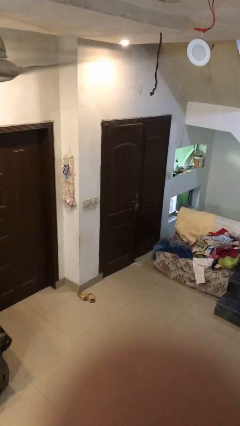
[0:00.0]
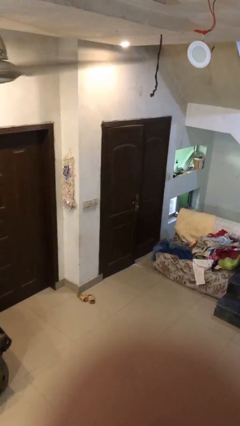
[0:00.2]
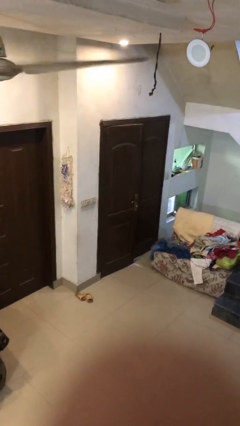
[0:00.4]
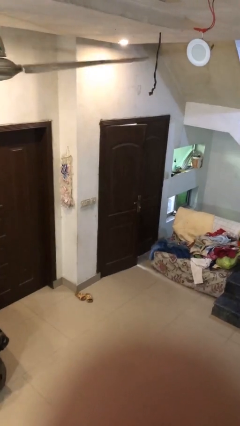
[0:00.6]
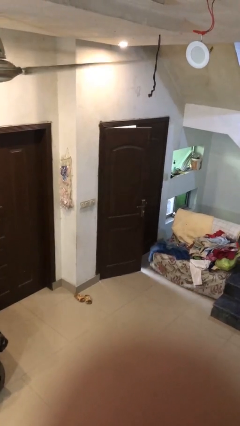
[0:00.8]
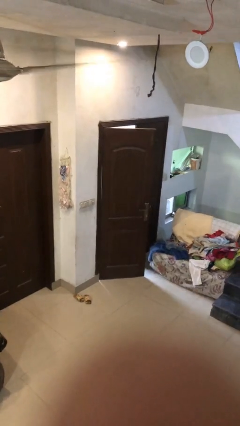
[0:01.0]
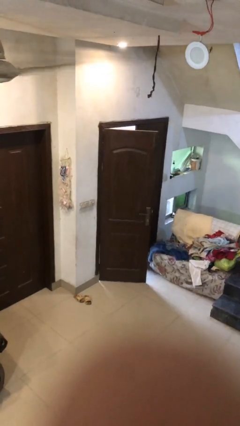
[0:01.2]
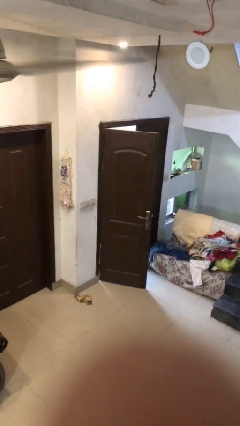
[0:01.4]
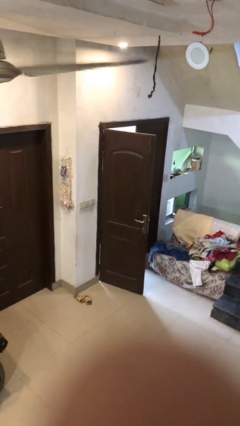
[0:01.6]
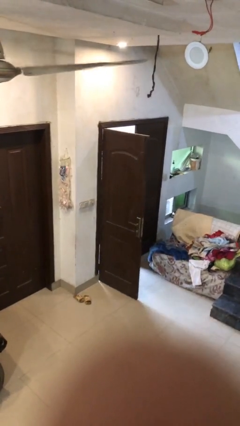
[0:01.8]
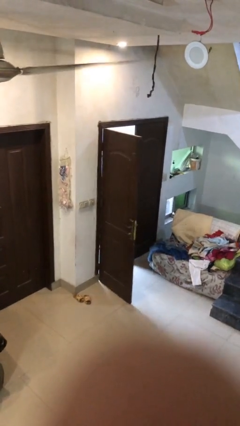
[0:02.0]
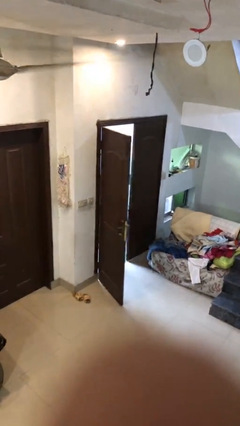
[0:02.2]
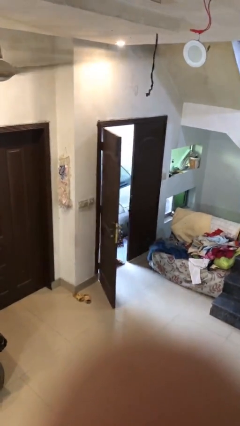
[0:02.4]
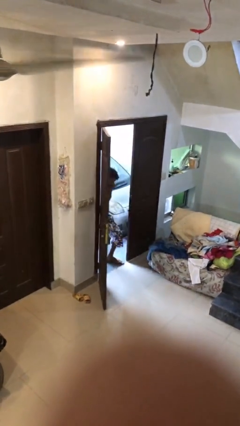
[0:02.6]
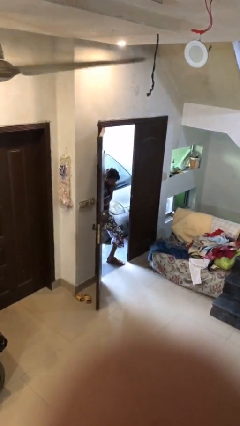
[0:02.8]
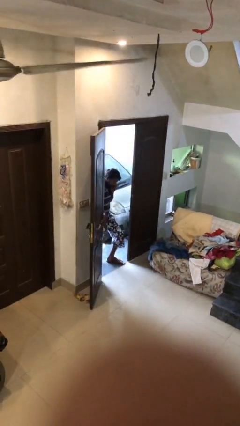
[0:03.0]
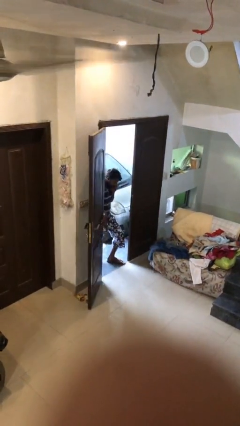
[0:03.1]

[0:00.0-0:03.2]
person opens facility door

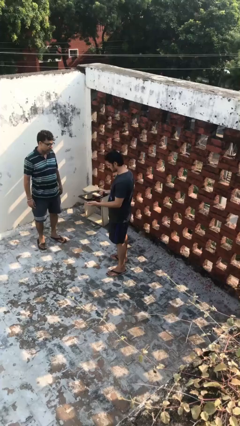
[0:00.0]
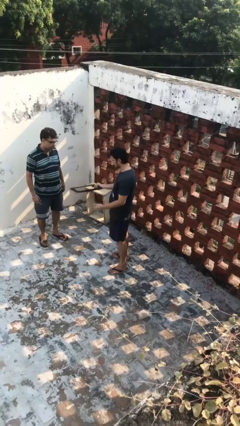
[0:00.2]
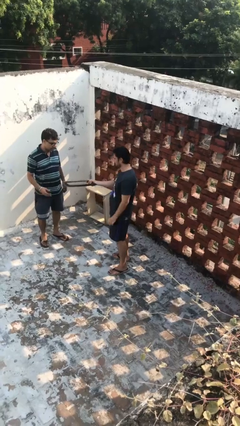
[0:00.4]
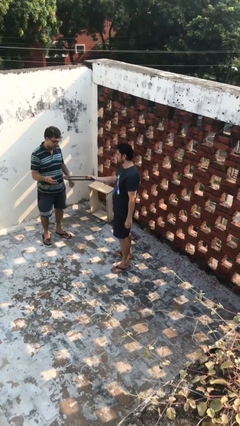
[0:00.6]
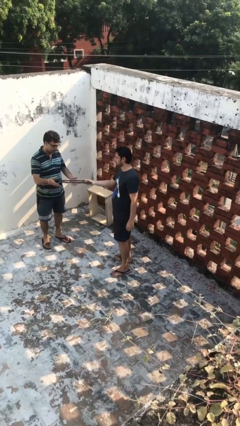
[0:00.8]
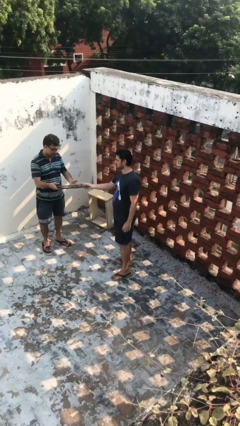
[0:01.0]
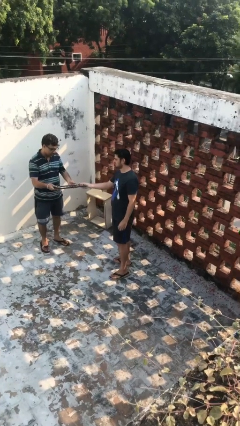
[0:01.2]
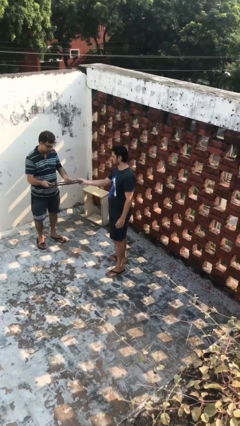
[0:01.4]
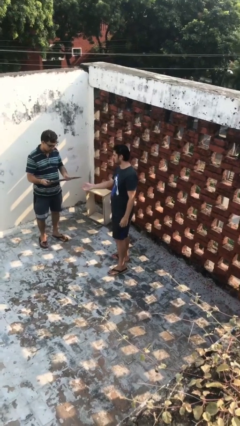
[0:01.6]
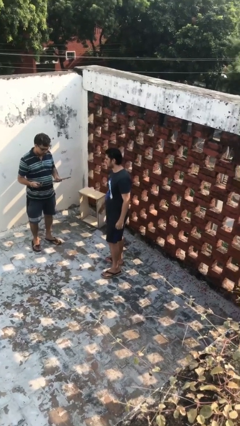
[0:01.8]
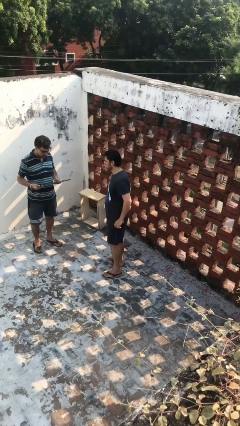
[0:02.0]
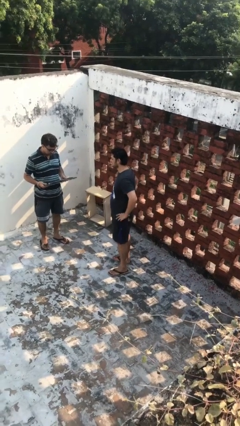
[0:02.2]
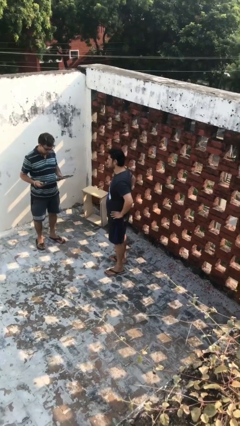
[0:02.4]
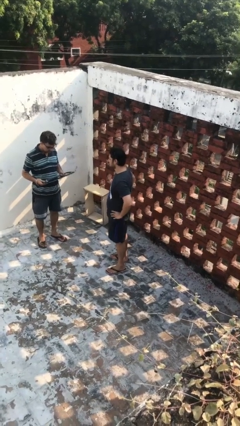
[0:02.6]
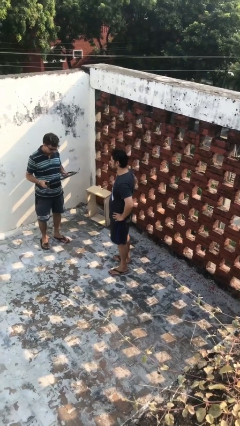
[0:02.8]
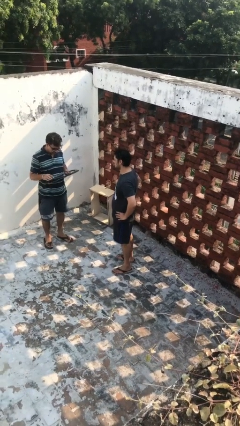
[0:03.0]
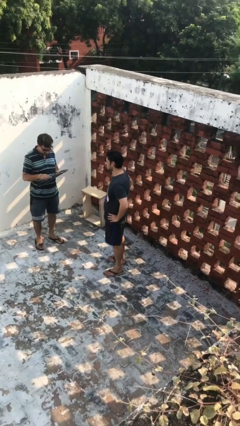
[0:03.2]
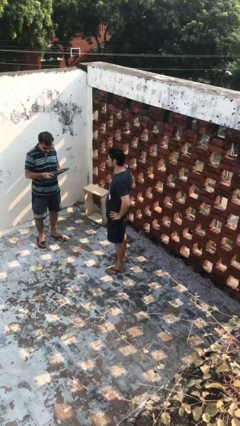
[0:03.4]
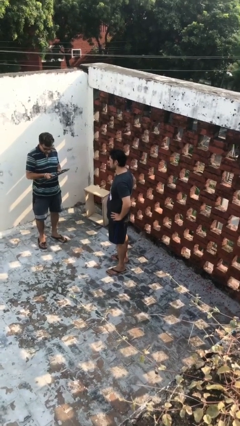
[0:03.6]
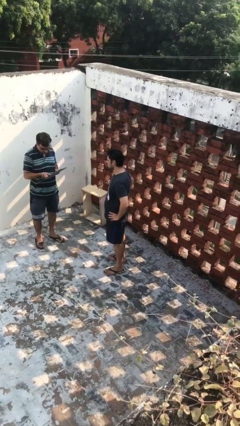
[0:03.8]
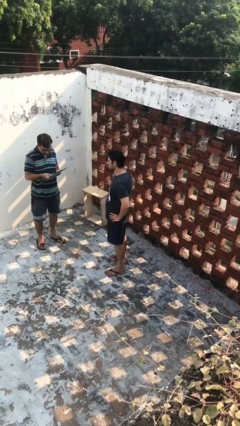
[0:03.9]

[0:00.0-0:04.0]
person transfers object to person

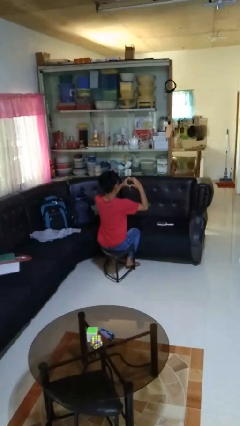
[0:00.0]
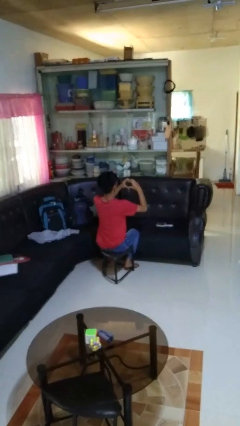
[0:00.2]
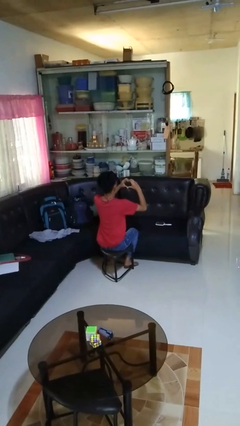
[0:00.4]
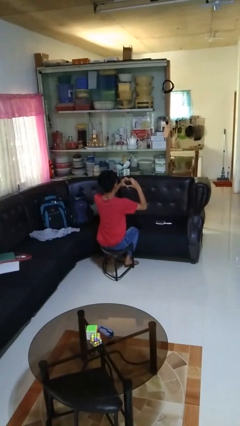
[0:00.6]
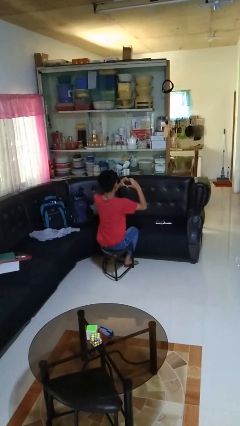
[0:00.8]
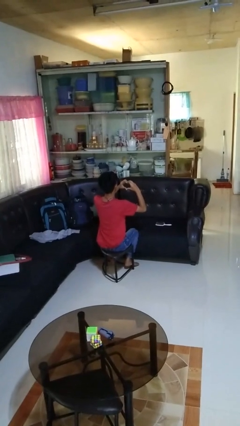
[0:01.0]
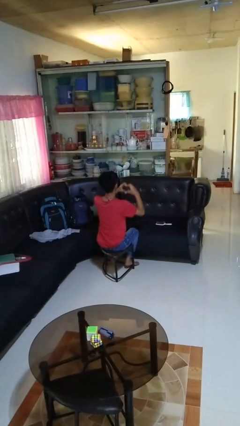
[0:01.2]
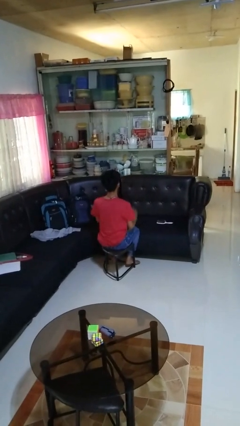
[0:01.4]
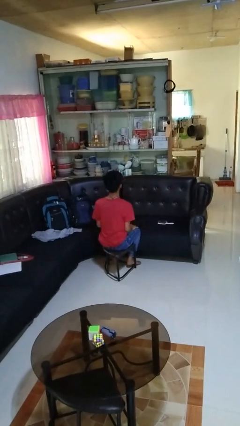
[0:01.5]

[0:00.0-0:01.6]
person gestures heart

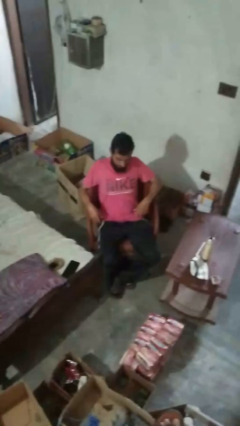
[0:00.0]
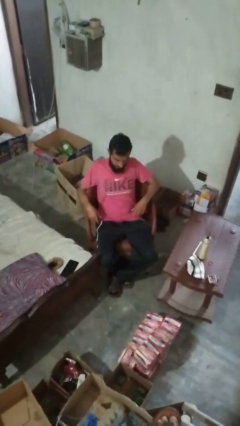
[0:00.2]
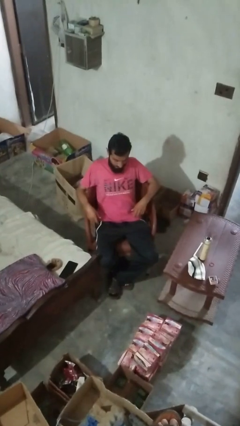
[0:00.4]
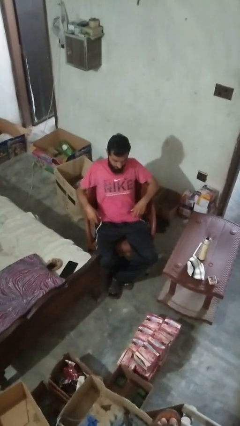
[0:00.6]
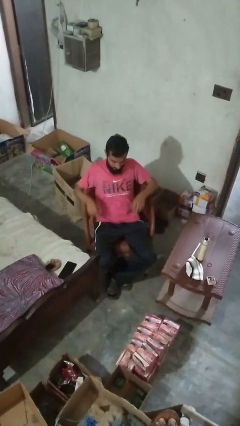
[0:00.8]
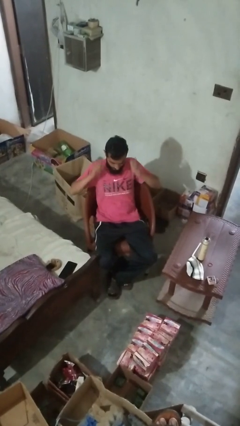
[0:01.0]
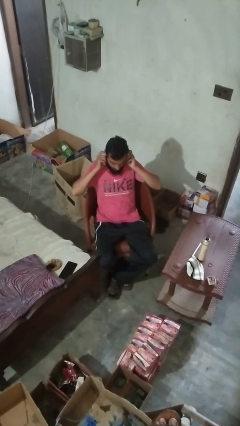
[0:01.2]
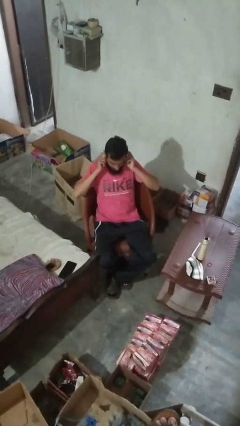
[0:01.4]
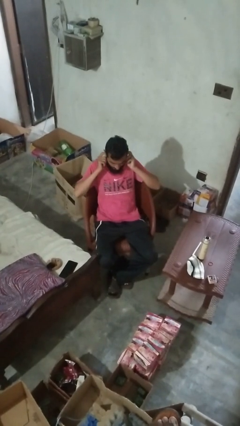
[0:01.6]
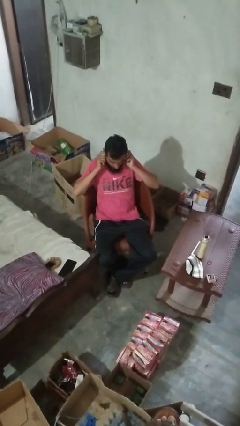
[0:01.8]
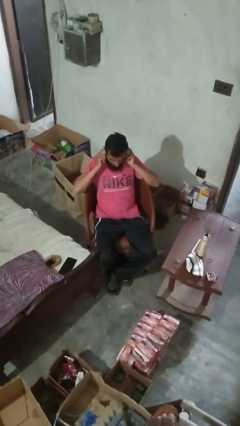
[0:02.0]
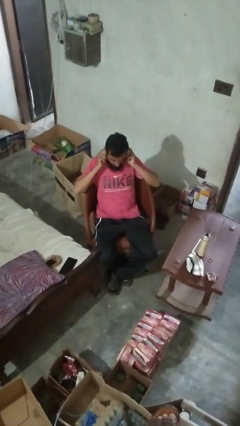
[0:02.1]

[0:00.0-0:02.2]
person puts fingers in ear

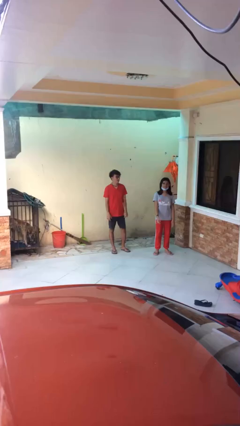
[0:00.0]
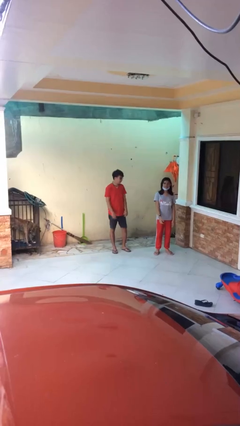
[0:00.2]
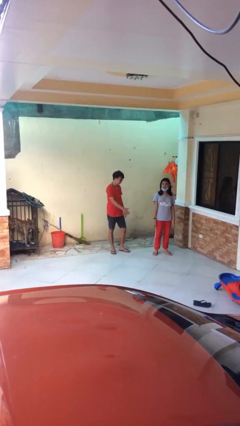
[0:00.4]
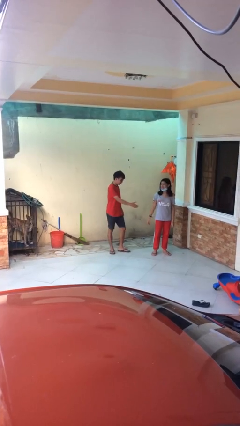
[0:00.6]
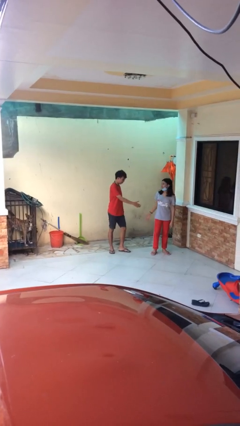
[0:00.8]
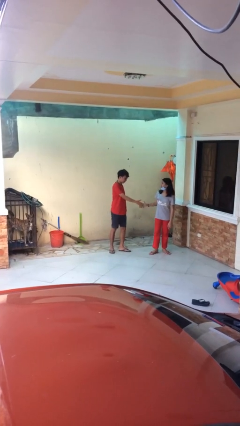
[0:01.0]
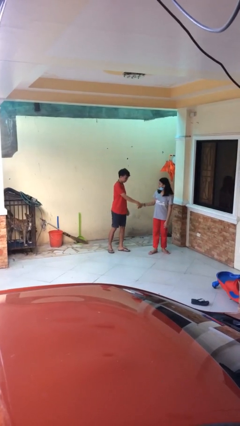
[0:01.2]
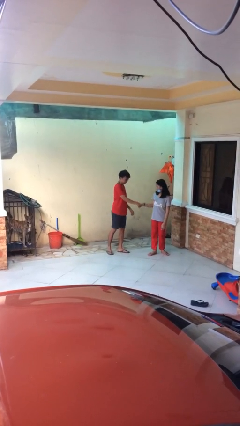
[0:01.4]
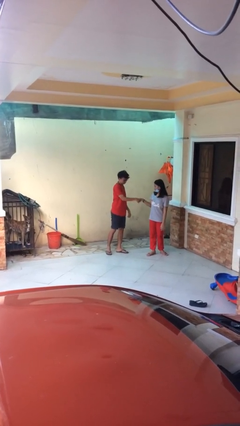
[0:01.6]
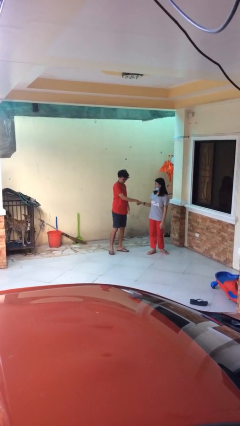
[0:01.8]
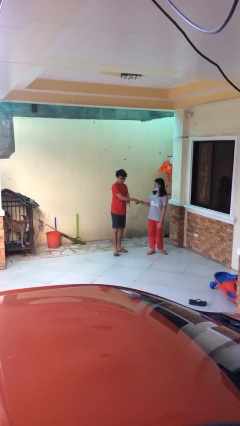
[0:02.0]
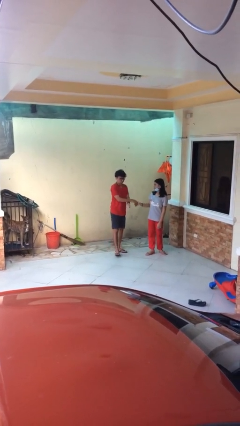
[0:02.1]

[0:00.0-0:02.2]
person shakes hand

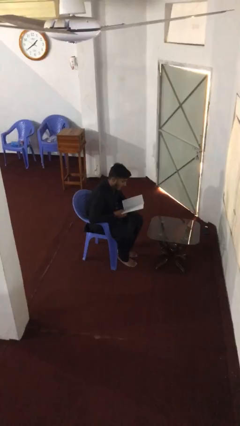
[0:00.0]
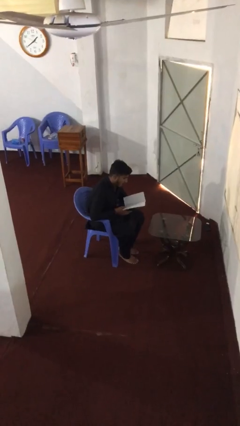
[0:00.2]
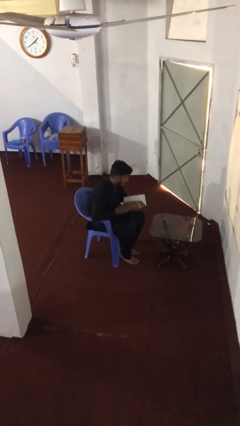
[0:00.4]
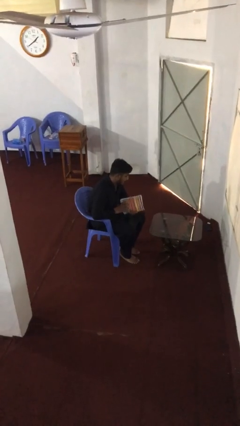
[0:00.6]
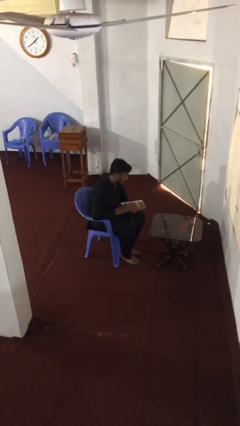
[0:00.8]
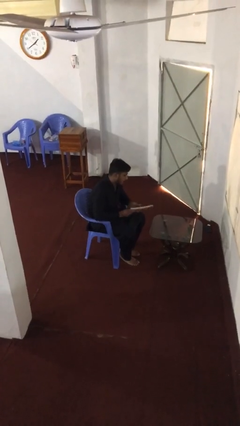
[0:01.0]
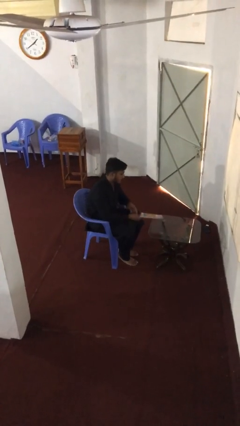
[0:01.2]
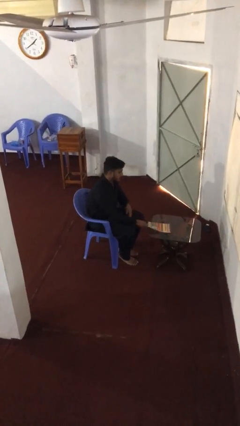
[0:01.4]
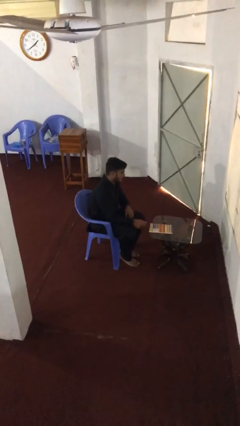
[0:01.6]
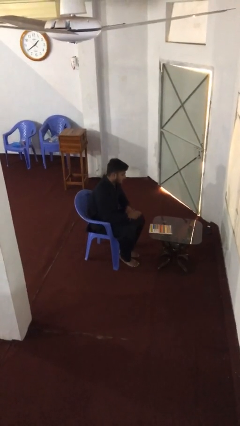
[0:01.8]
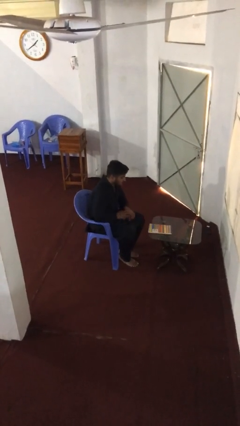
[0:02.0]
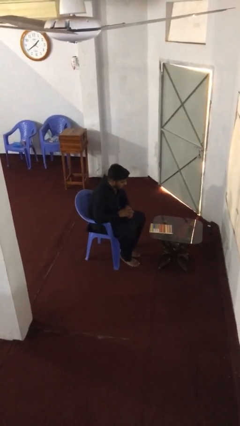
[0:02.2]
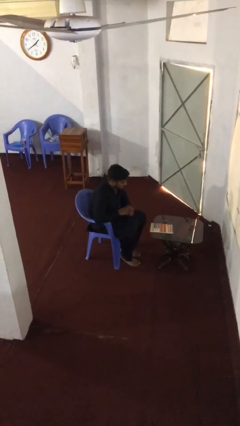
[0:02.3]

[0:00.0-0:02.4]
person puts down object on table

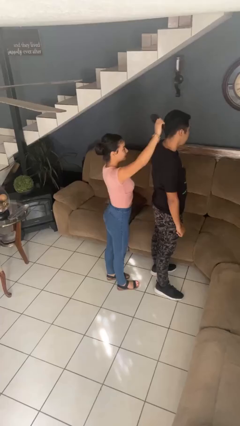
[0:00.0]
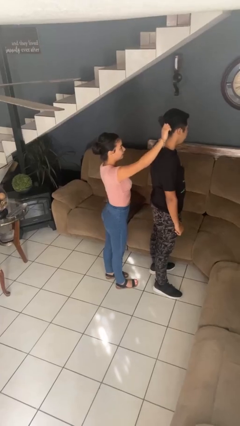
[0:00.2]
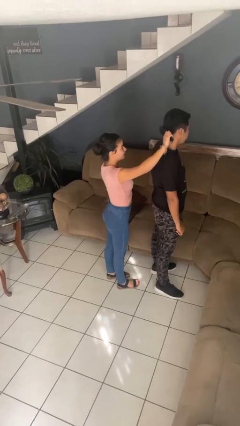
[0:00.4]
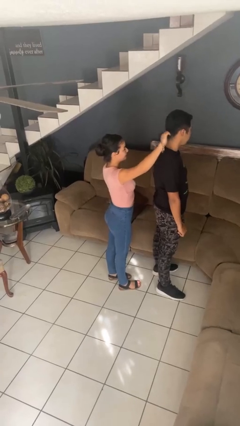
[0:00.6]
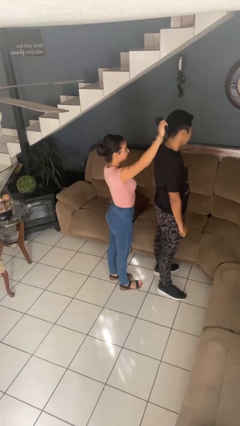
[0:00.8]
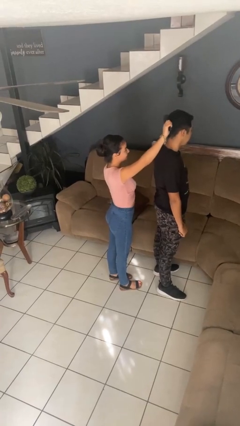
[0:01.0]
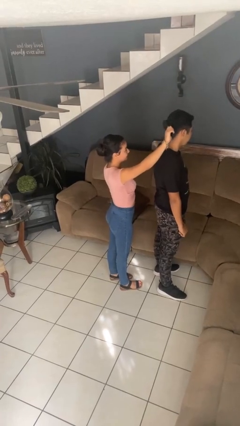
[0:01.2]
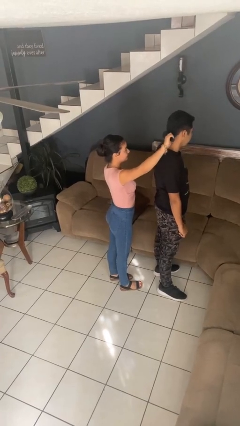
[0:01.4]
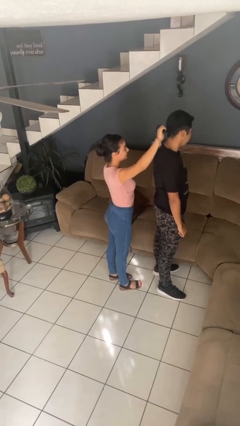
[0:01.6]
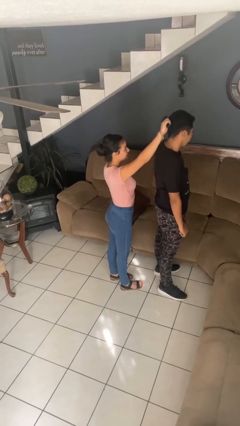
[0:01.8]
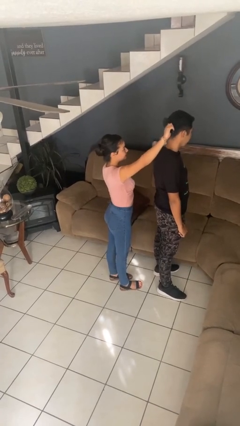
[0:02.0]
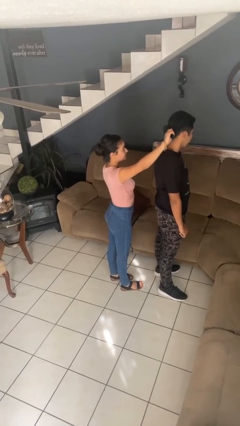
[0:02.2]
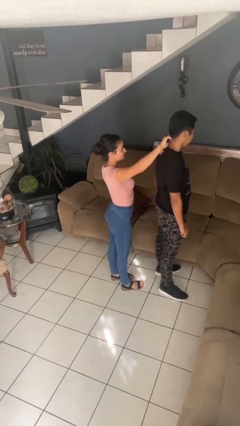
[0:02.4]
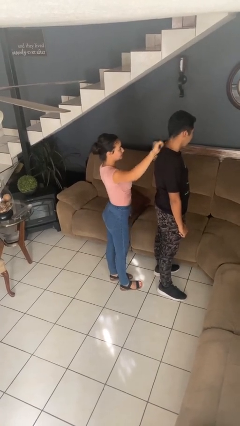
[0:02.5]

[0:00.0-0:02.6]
person brushes hair of person
